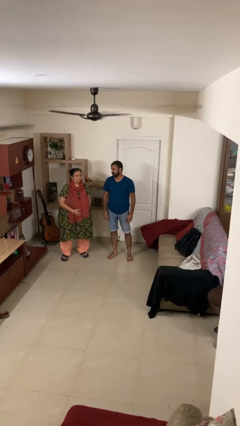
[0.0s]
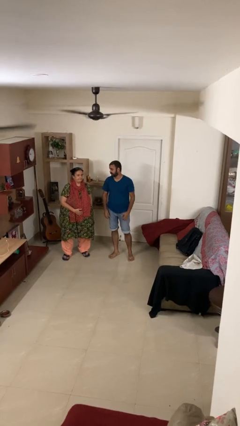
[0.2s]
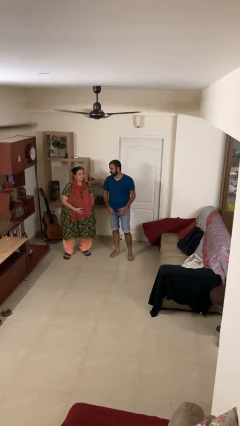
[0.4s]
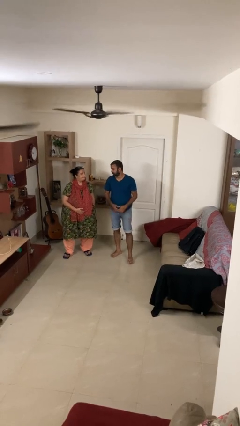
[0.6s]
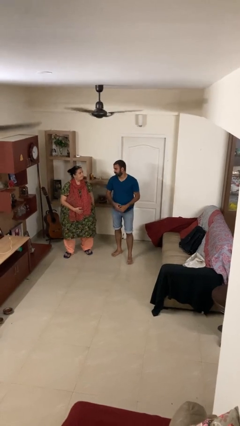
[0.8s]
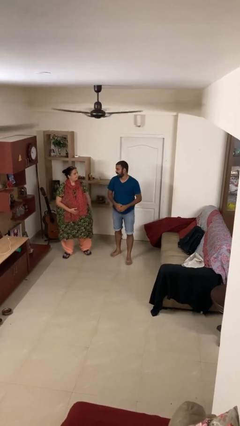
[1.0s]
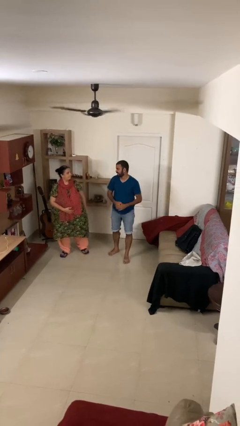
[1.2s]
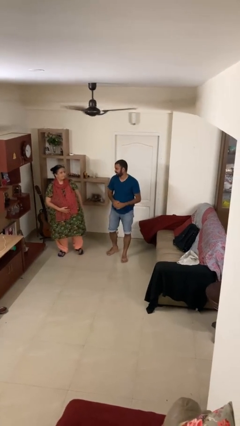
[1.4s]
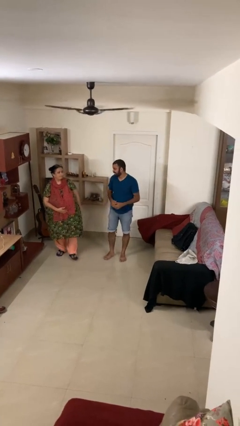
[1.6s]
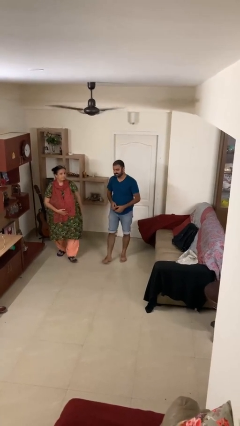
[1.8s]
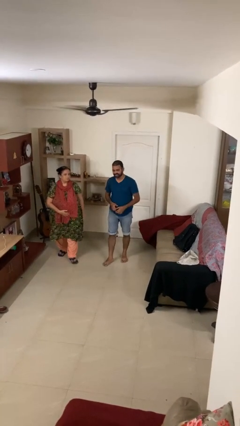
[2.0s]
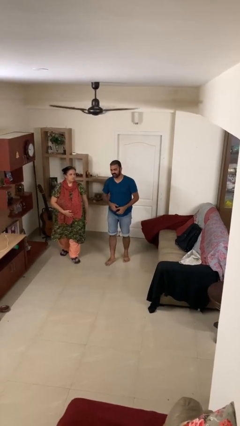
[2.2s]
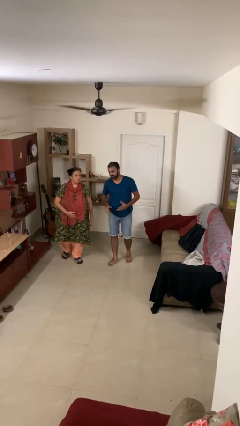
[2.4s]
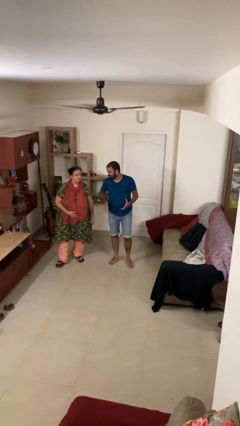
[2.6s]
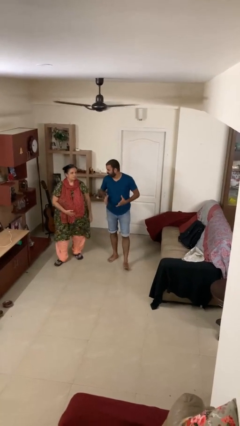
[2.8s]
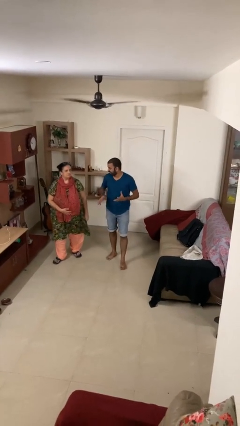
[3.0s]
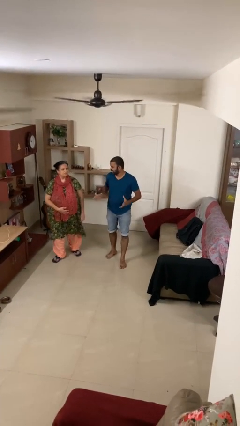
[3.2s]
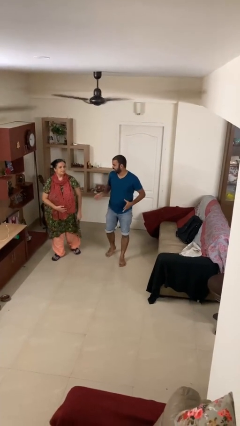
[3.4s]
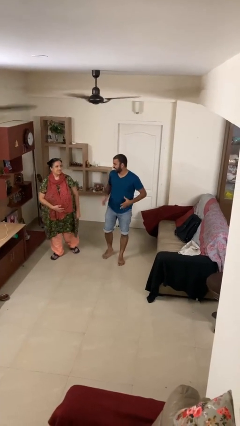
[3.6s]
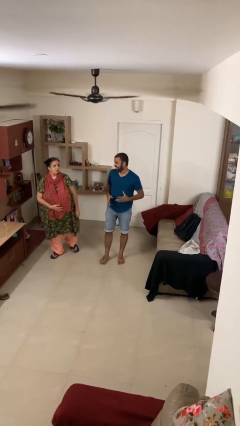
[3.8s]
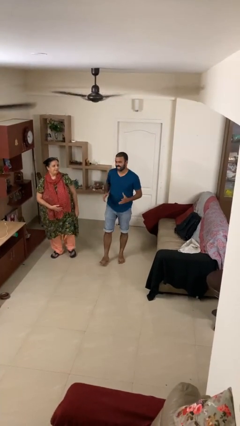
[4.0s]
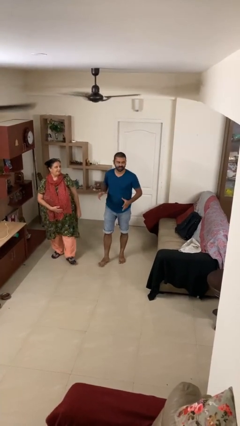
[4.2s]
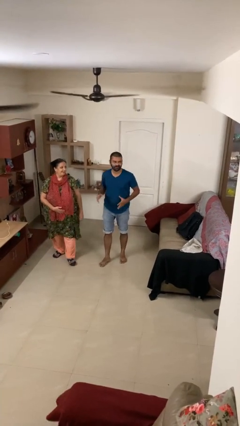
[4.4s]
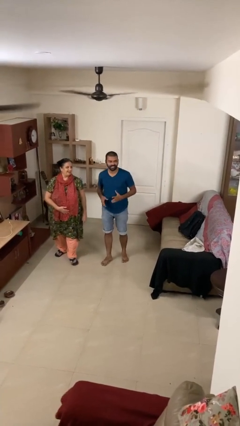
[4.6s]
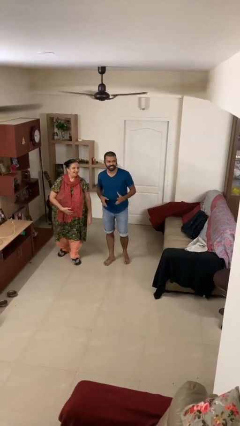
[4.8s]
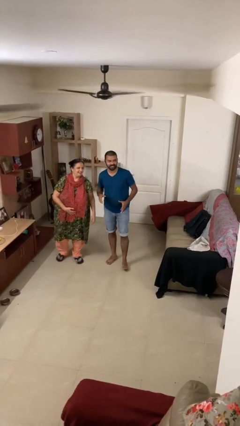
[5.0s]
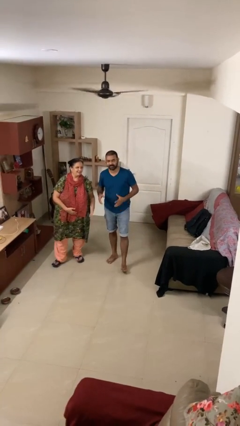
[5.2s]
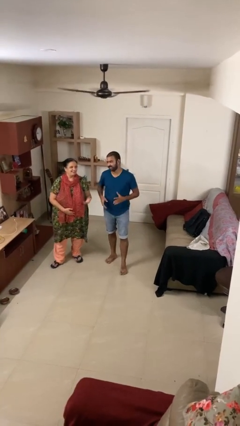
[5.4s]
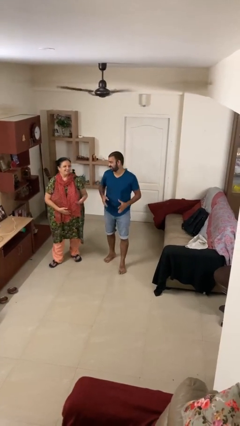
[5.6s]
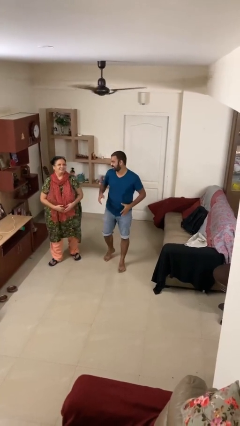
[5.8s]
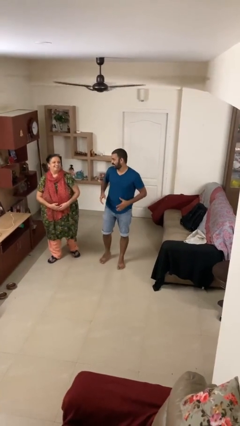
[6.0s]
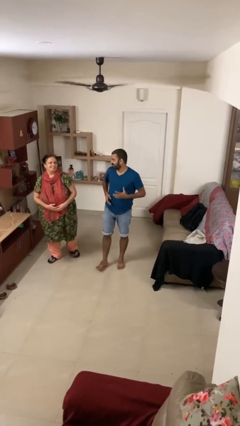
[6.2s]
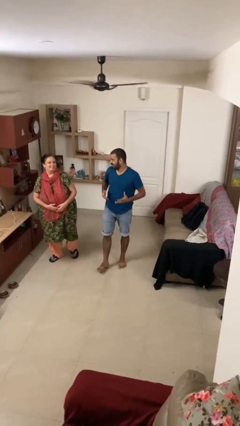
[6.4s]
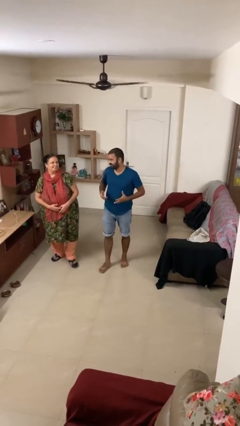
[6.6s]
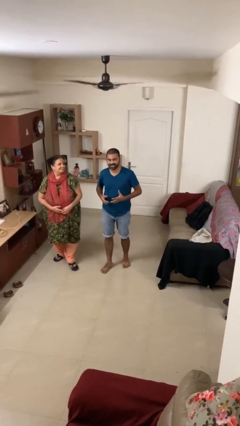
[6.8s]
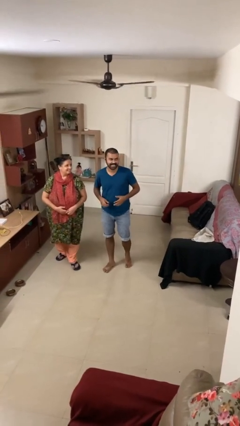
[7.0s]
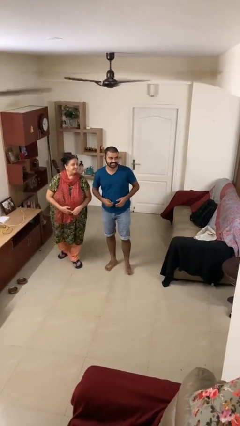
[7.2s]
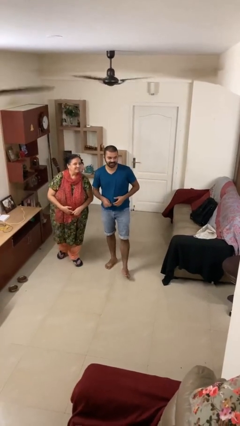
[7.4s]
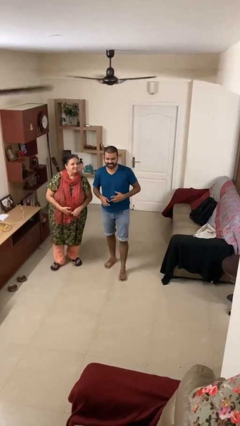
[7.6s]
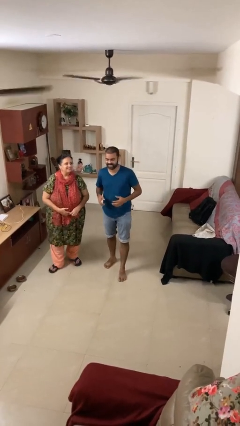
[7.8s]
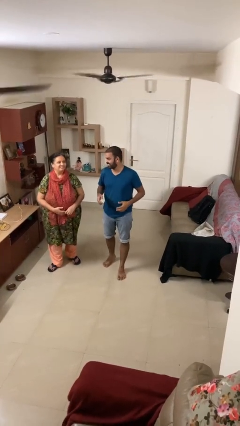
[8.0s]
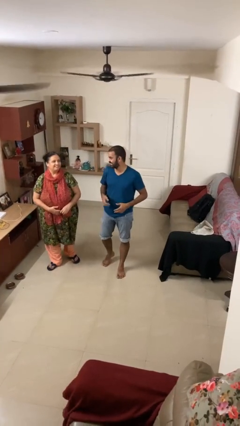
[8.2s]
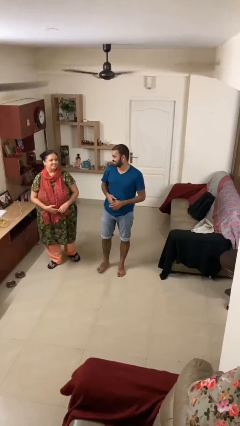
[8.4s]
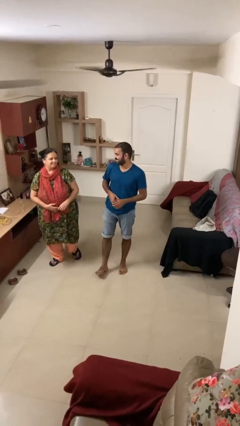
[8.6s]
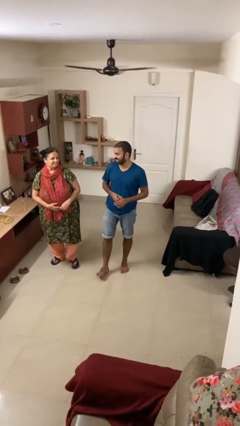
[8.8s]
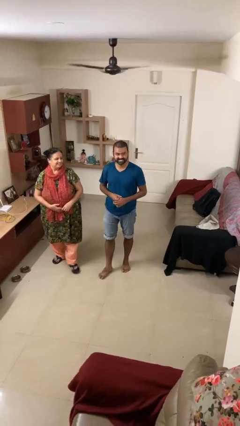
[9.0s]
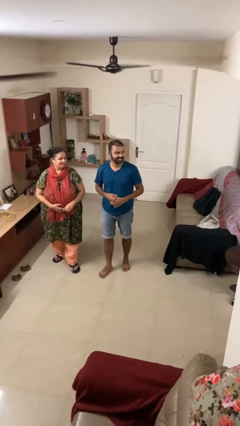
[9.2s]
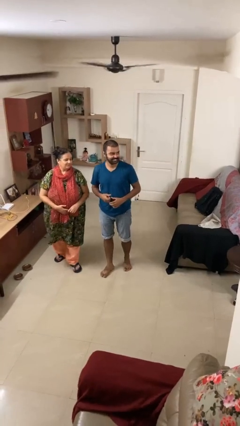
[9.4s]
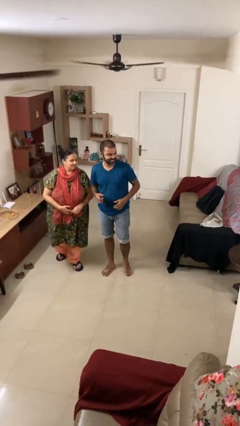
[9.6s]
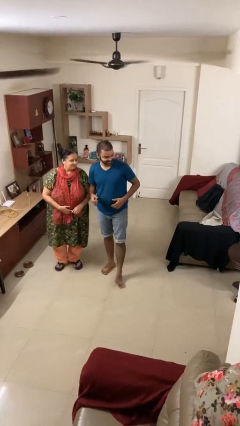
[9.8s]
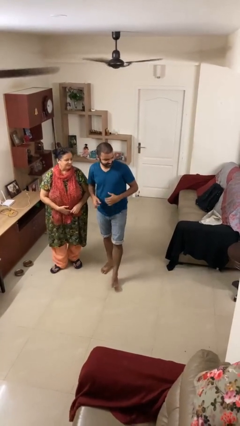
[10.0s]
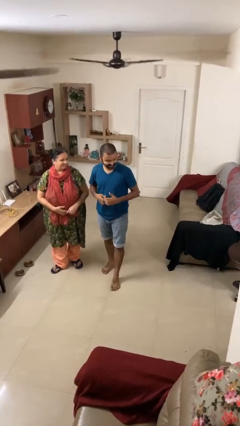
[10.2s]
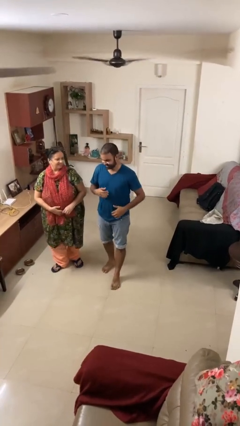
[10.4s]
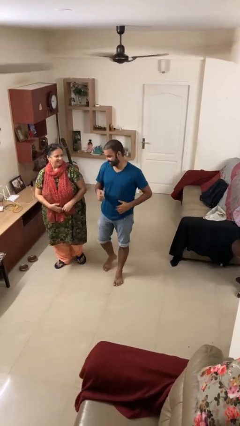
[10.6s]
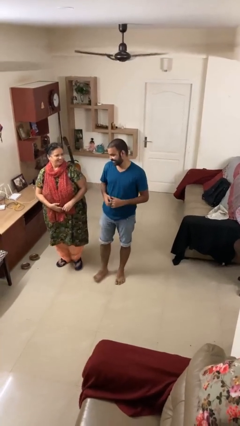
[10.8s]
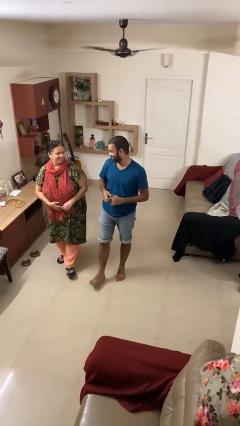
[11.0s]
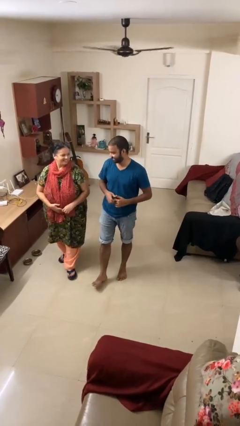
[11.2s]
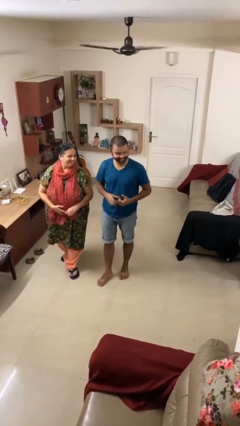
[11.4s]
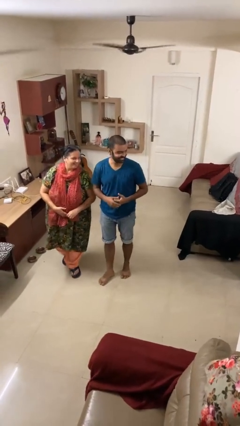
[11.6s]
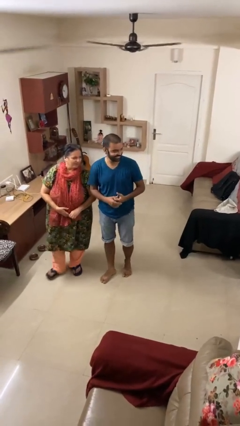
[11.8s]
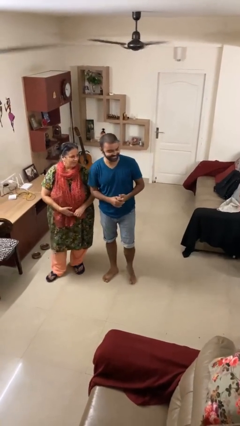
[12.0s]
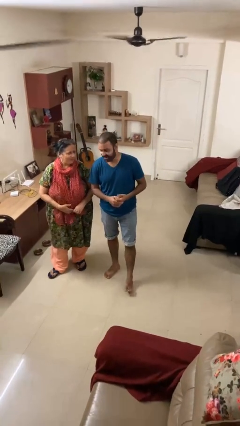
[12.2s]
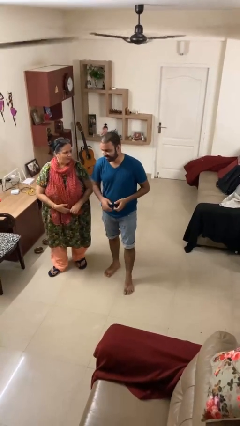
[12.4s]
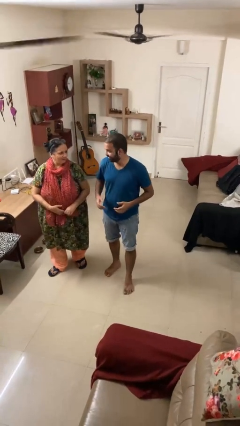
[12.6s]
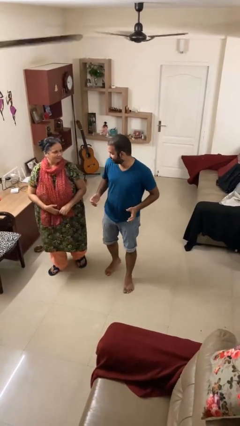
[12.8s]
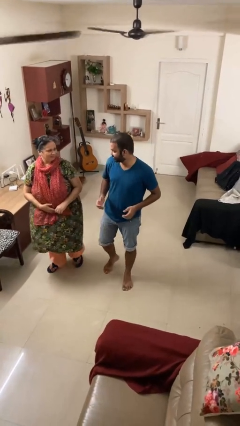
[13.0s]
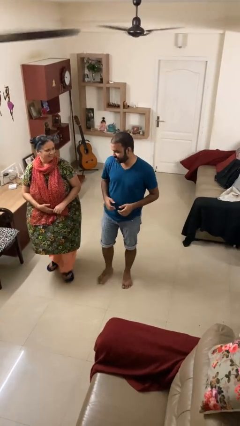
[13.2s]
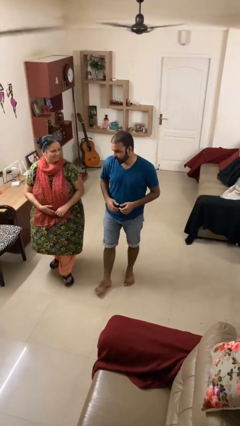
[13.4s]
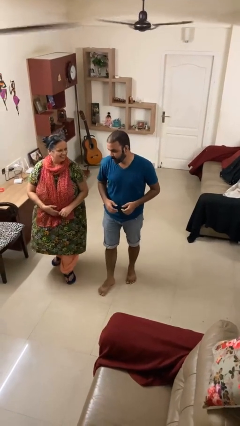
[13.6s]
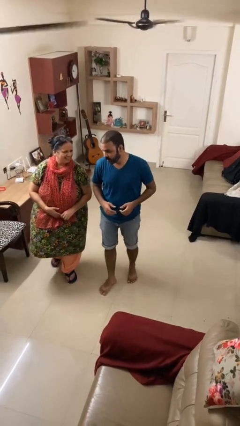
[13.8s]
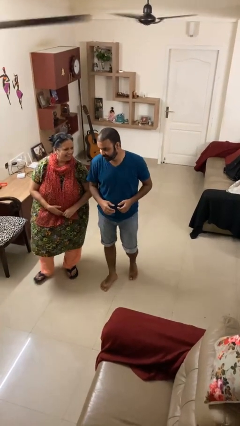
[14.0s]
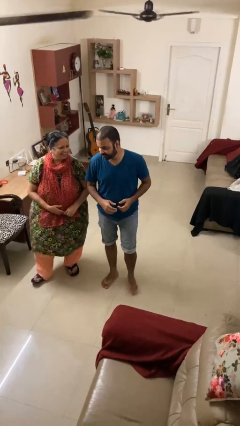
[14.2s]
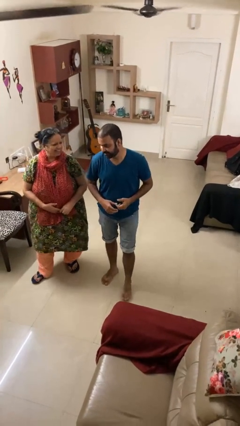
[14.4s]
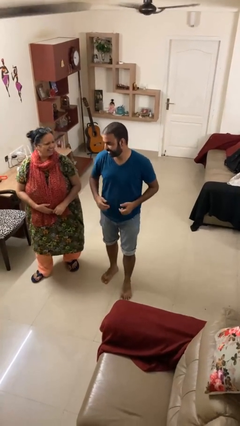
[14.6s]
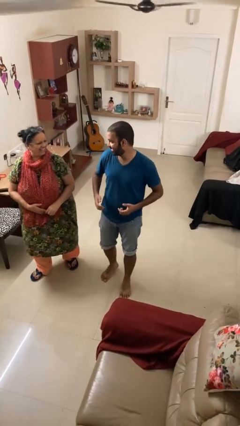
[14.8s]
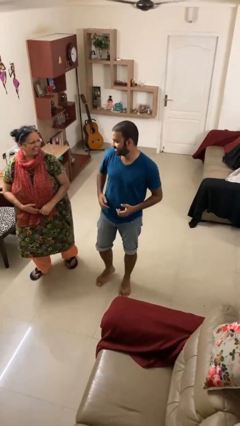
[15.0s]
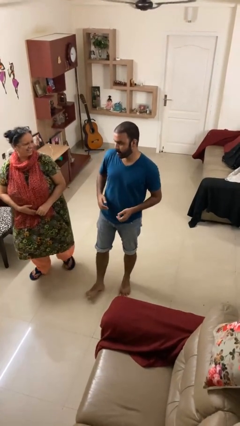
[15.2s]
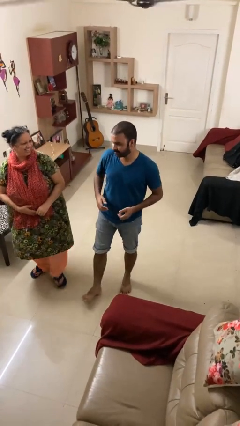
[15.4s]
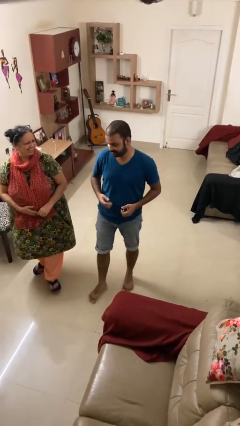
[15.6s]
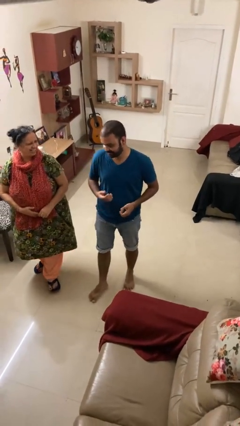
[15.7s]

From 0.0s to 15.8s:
person talks to person

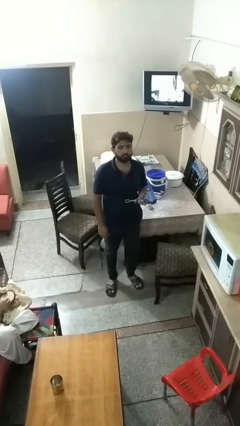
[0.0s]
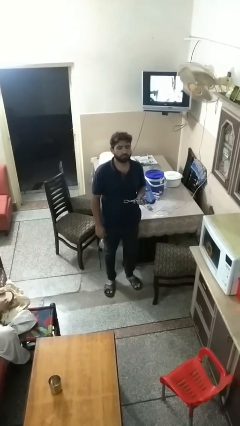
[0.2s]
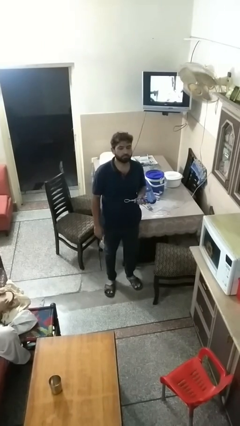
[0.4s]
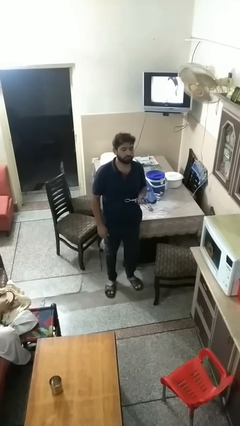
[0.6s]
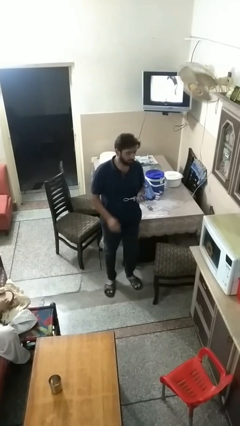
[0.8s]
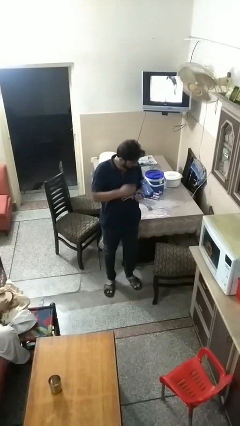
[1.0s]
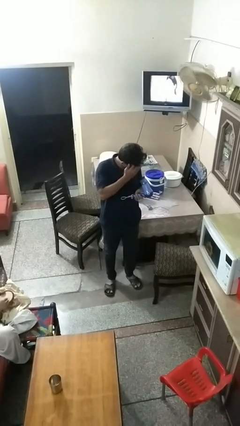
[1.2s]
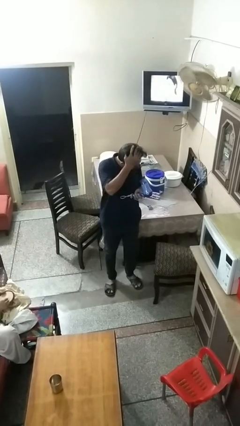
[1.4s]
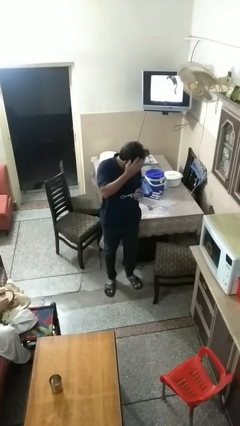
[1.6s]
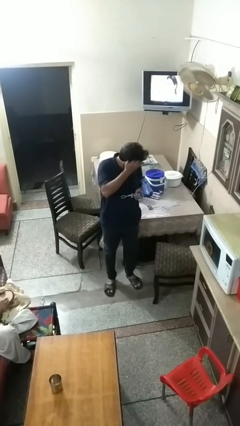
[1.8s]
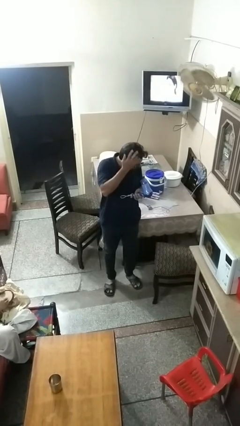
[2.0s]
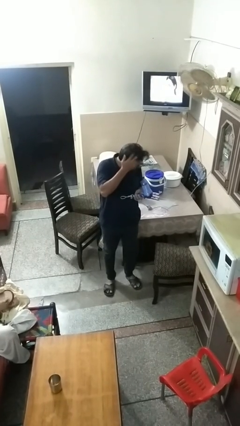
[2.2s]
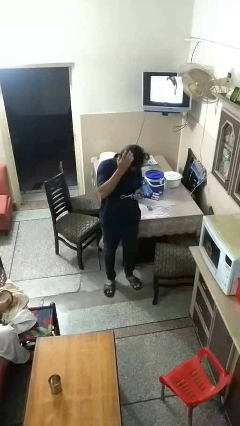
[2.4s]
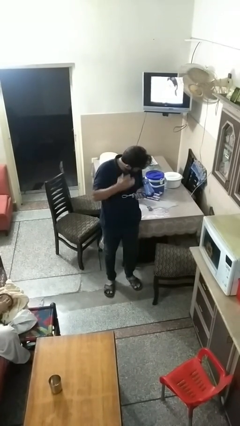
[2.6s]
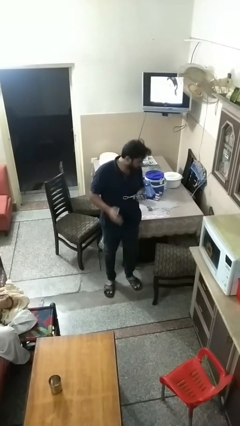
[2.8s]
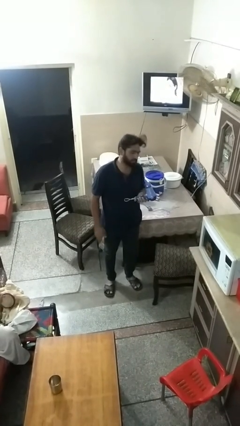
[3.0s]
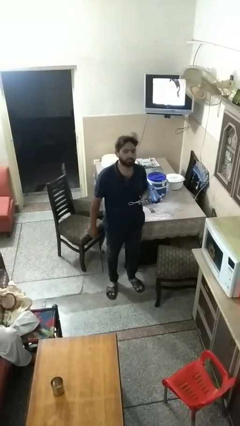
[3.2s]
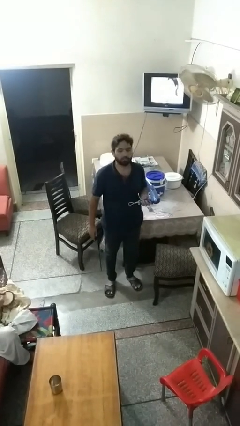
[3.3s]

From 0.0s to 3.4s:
person dries hair with hairdryer
